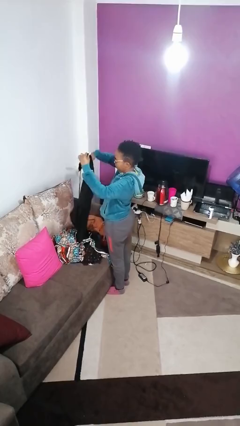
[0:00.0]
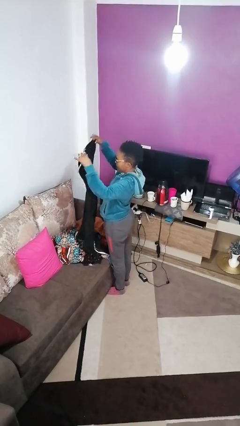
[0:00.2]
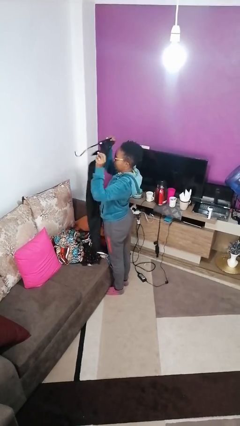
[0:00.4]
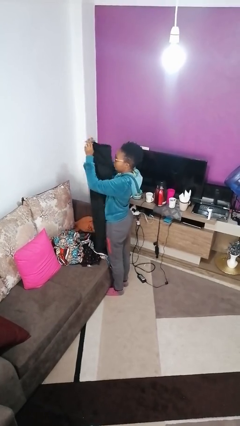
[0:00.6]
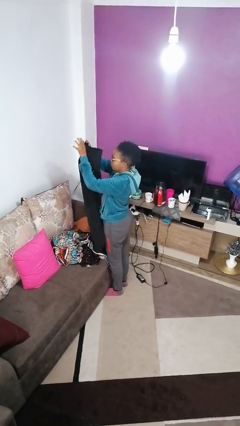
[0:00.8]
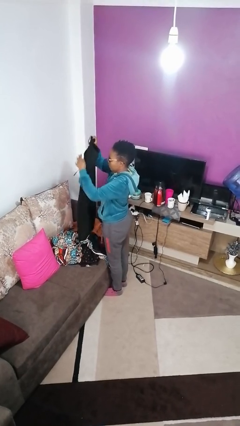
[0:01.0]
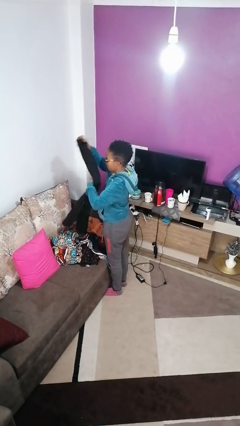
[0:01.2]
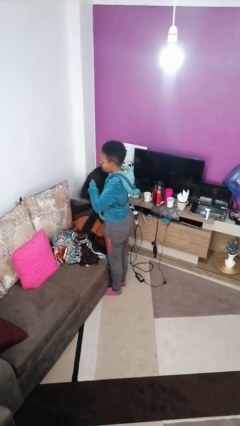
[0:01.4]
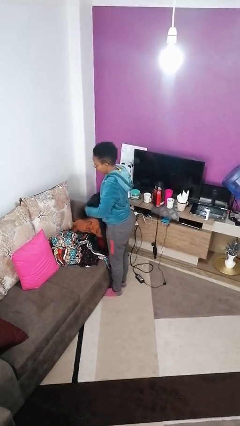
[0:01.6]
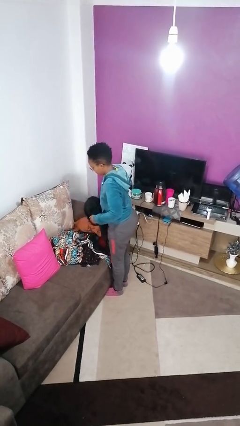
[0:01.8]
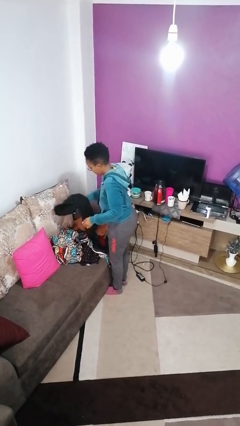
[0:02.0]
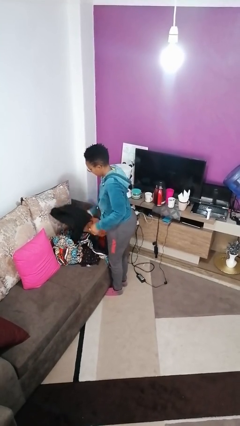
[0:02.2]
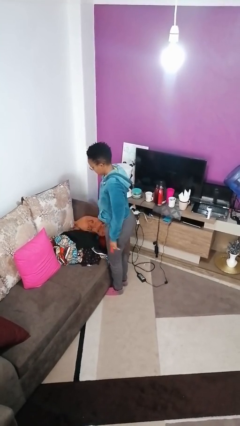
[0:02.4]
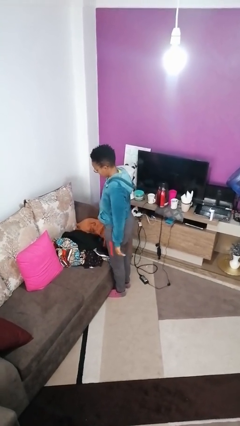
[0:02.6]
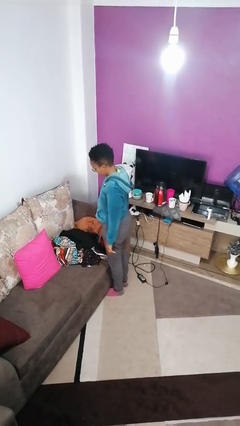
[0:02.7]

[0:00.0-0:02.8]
person folds pants

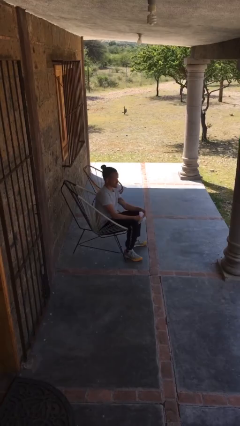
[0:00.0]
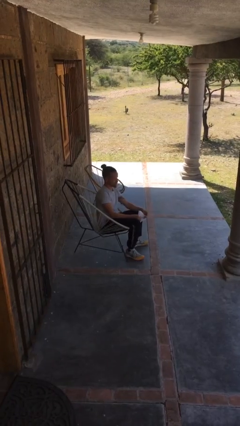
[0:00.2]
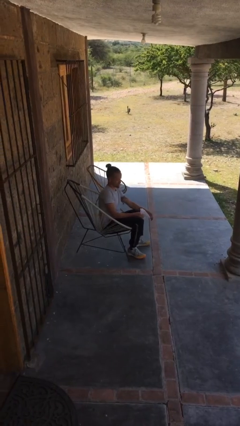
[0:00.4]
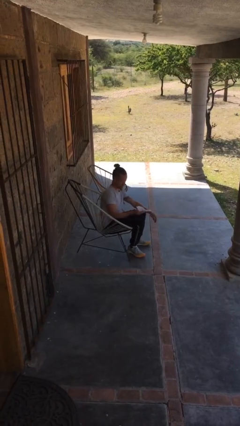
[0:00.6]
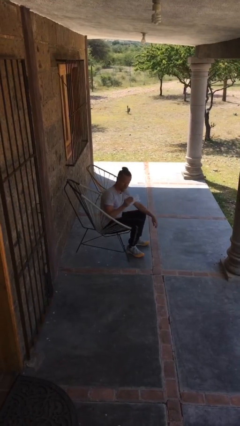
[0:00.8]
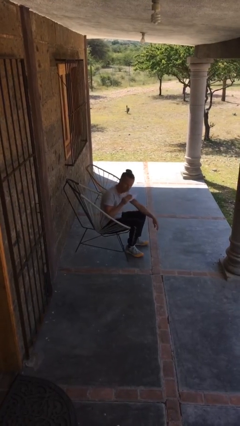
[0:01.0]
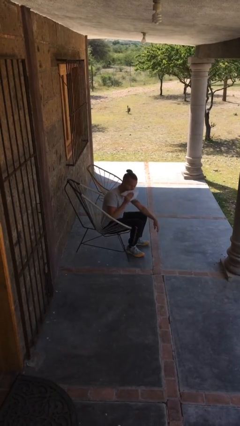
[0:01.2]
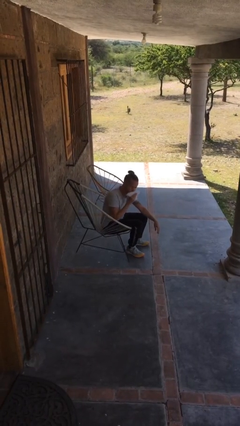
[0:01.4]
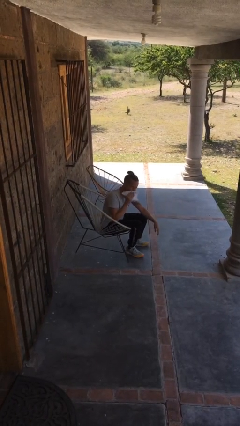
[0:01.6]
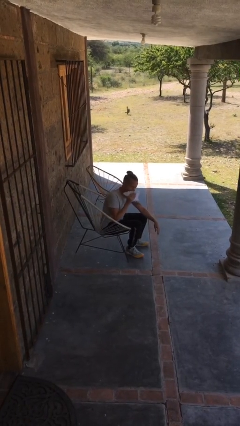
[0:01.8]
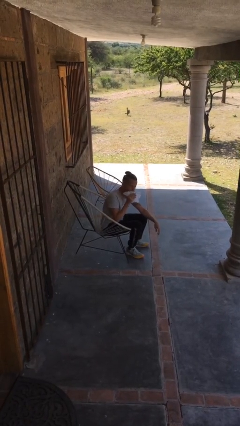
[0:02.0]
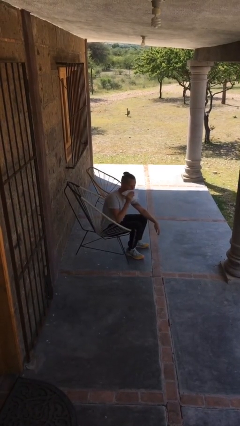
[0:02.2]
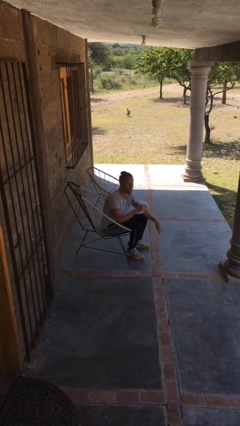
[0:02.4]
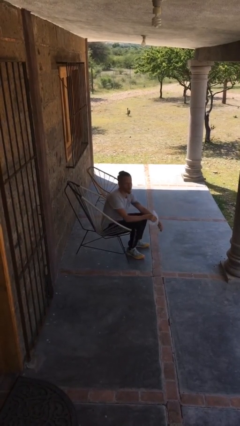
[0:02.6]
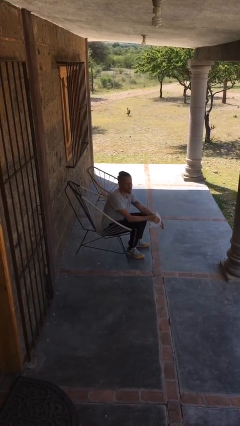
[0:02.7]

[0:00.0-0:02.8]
person wipes mouth with napkin

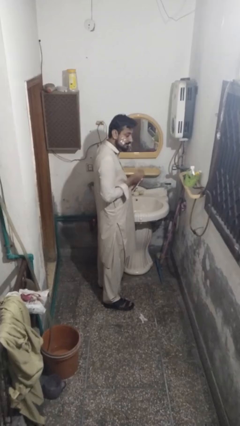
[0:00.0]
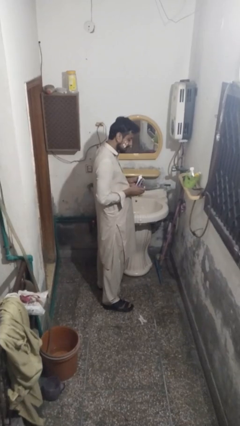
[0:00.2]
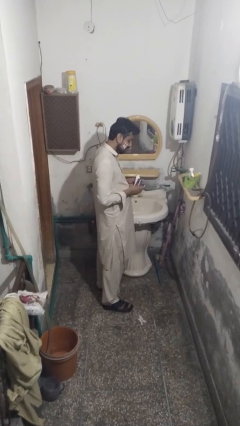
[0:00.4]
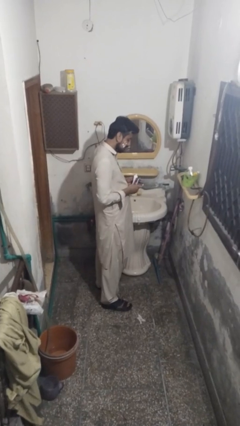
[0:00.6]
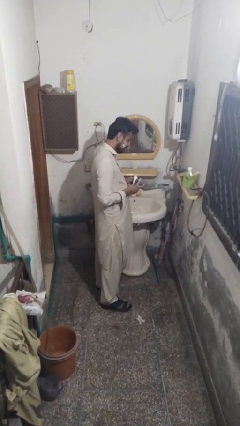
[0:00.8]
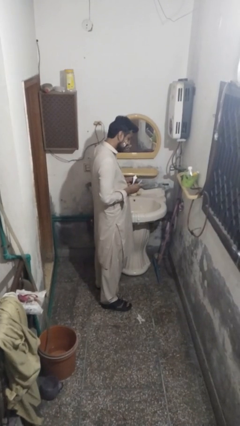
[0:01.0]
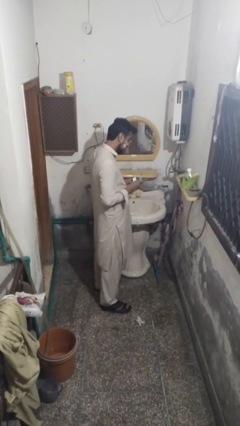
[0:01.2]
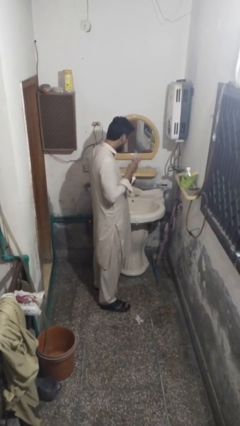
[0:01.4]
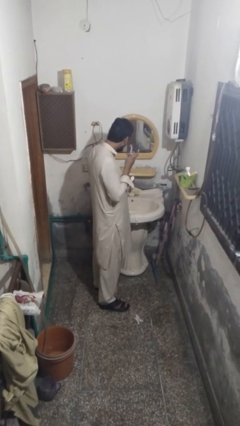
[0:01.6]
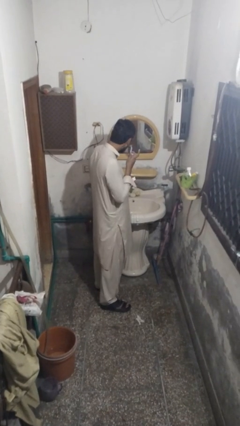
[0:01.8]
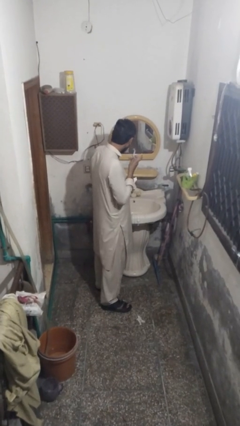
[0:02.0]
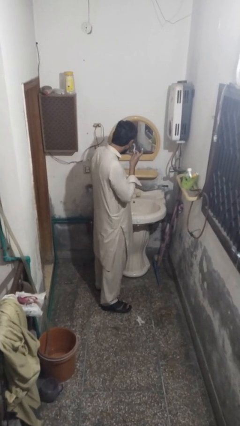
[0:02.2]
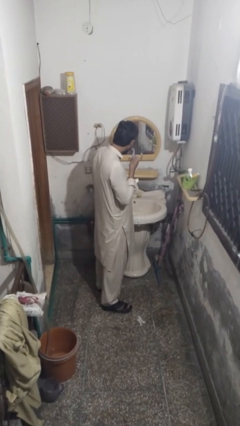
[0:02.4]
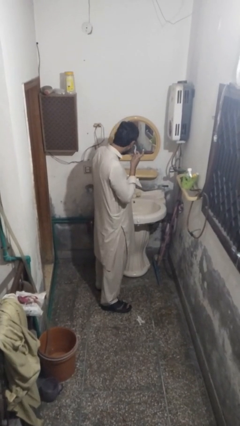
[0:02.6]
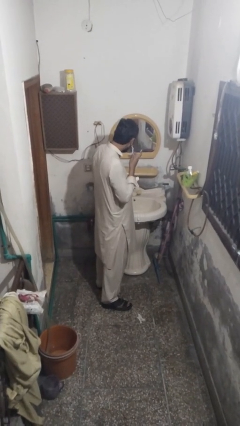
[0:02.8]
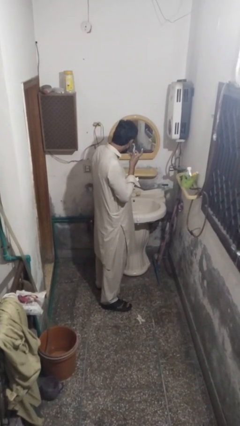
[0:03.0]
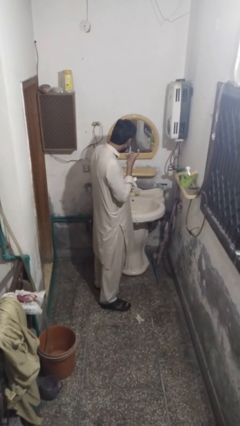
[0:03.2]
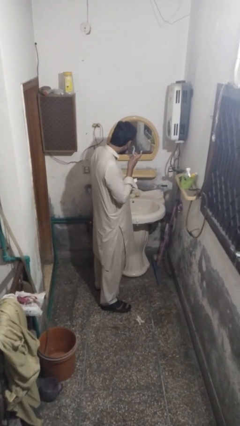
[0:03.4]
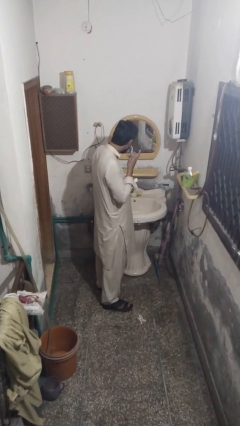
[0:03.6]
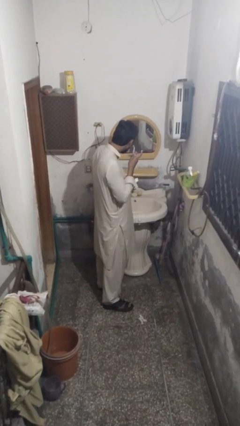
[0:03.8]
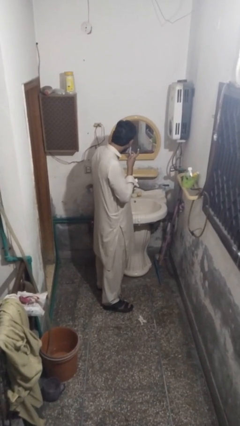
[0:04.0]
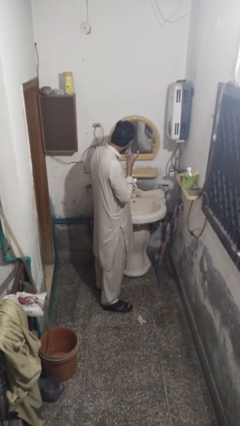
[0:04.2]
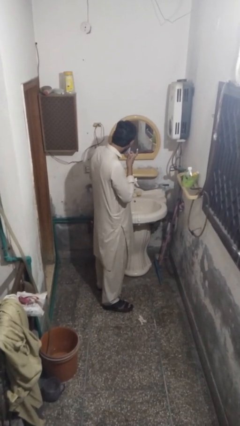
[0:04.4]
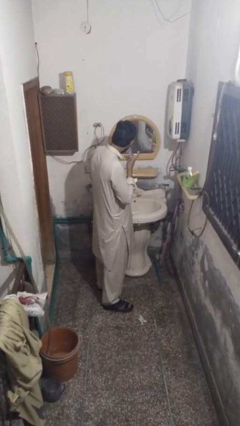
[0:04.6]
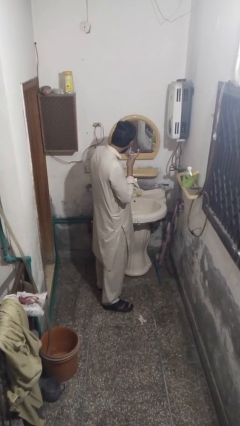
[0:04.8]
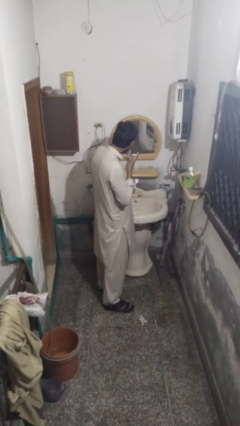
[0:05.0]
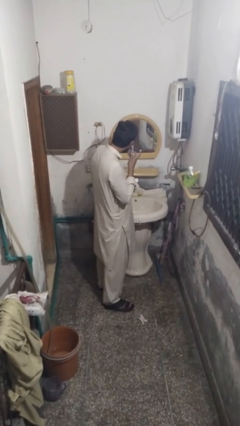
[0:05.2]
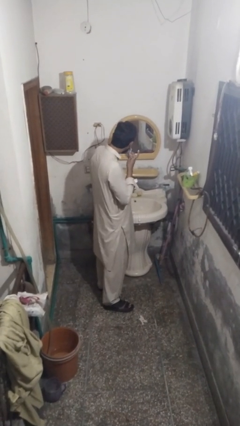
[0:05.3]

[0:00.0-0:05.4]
person shaves face

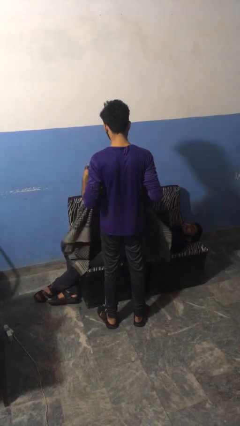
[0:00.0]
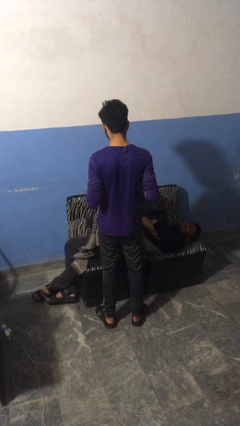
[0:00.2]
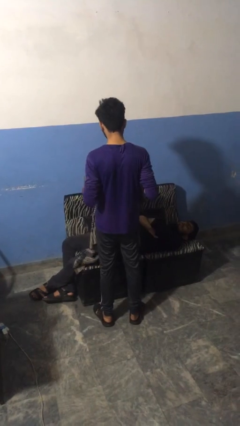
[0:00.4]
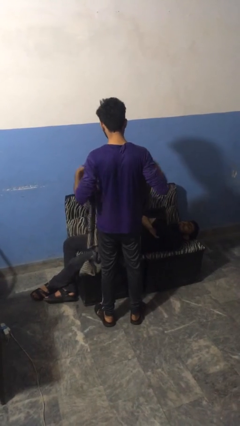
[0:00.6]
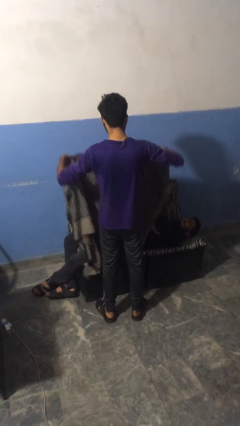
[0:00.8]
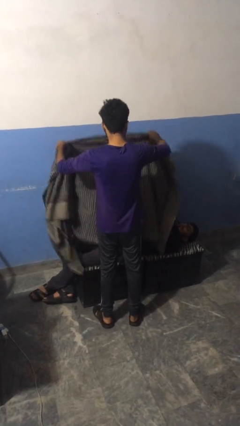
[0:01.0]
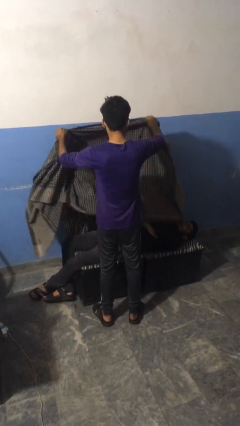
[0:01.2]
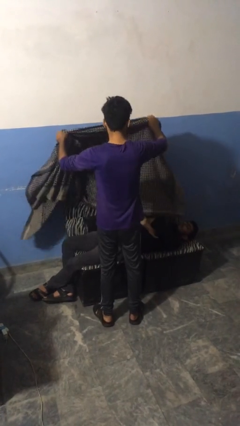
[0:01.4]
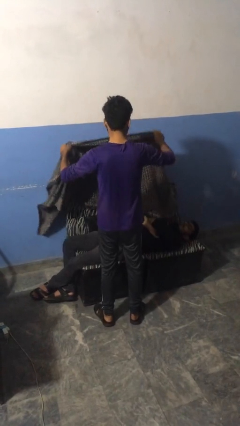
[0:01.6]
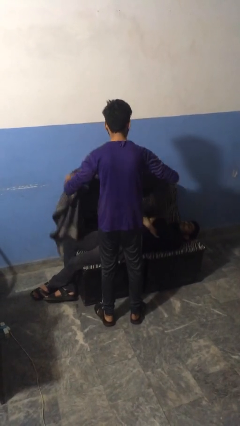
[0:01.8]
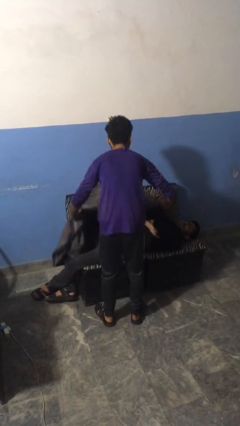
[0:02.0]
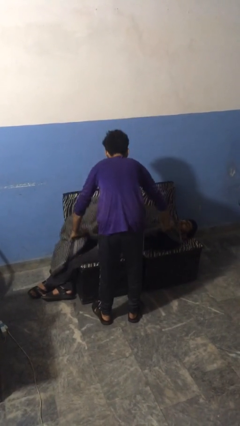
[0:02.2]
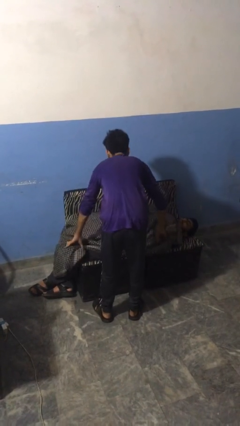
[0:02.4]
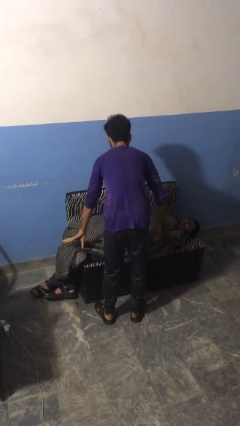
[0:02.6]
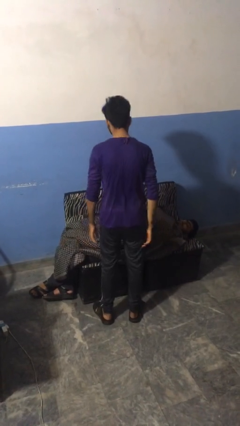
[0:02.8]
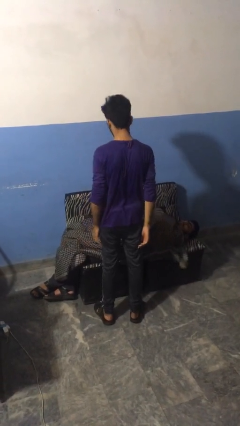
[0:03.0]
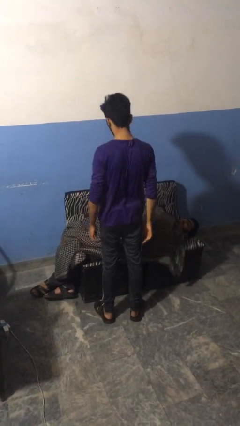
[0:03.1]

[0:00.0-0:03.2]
person covers friend with blanket

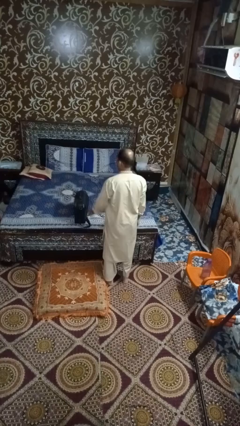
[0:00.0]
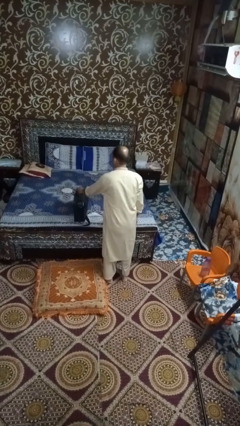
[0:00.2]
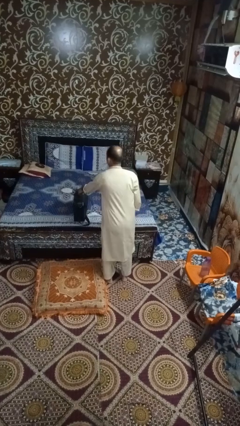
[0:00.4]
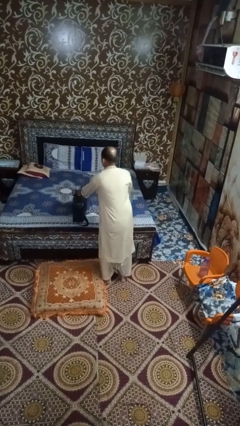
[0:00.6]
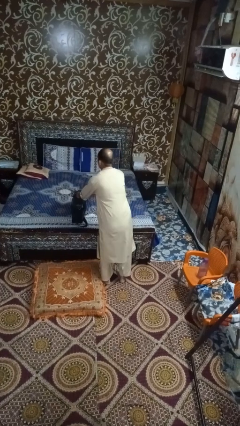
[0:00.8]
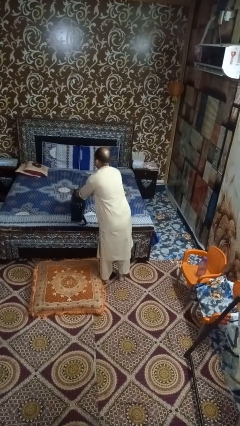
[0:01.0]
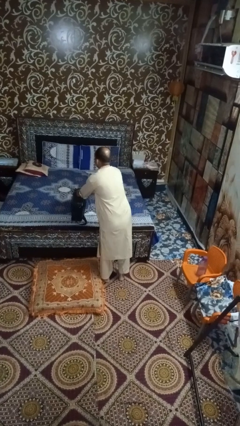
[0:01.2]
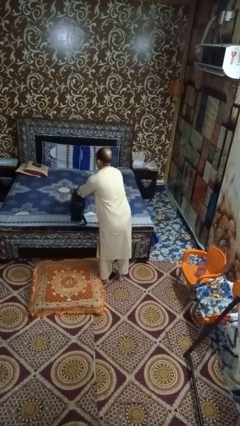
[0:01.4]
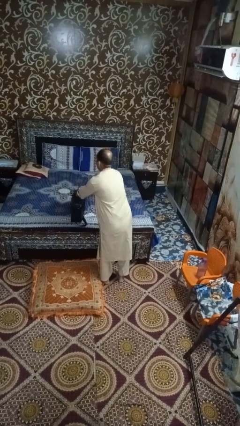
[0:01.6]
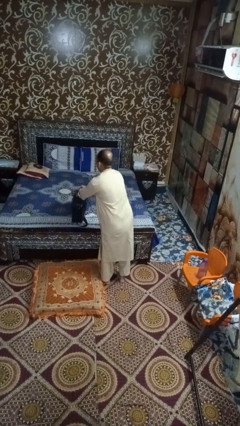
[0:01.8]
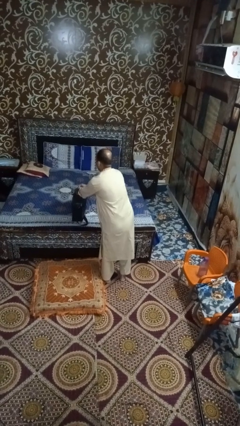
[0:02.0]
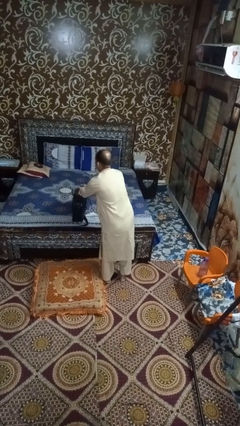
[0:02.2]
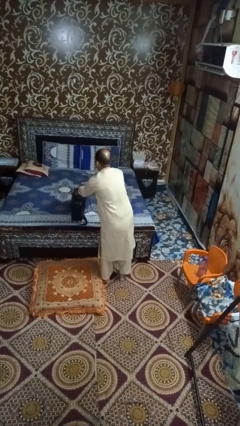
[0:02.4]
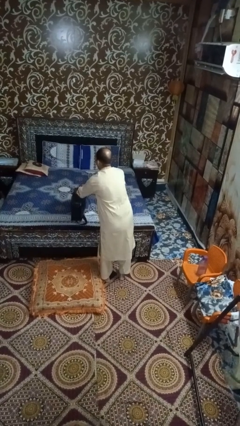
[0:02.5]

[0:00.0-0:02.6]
person picks up object from bed

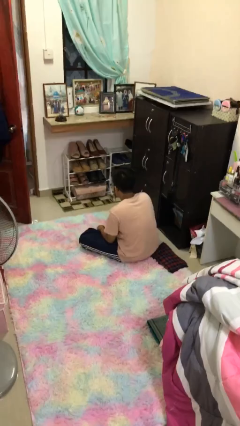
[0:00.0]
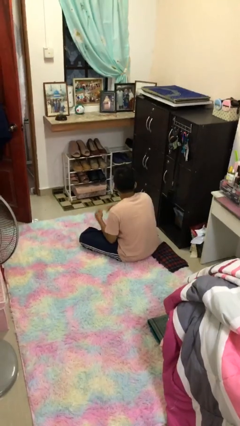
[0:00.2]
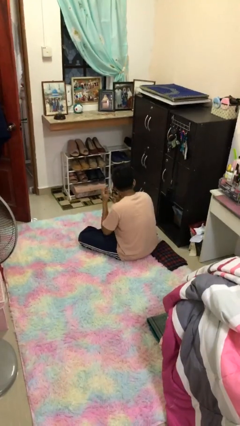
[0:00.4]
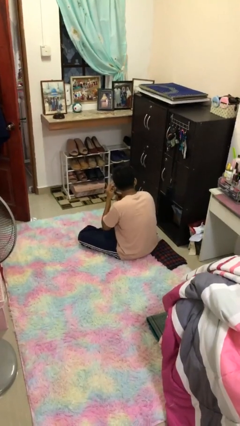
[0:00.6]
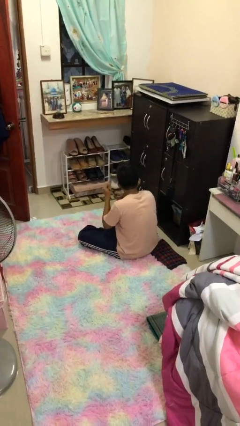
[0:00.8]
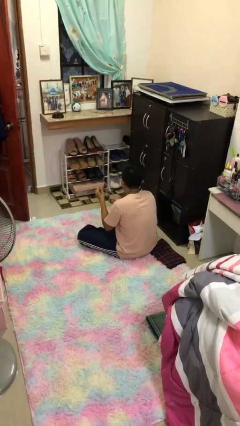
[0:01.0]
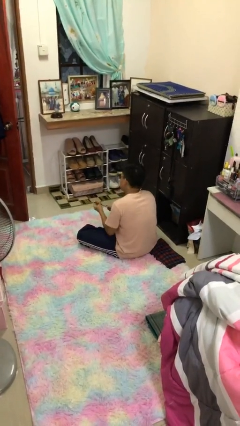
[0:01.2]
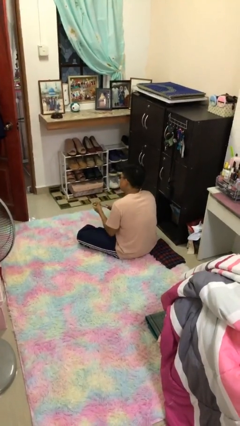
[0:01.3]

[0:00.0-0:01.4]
person takes off earrings
